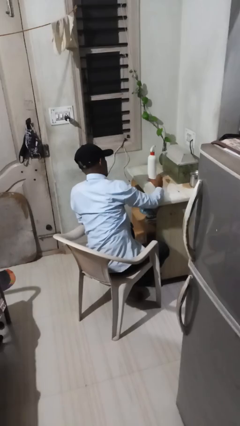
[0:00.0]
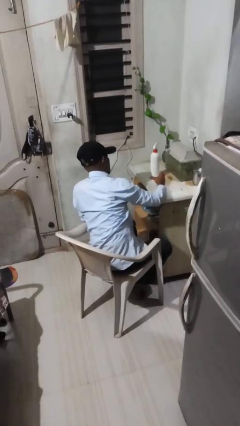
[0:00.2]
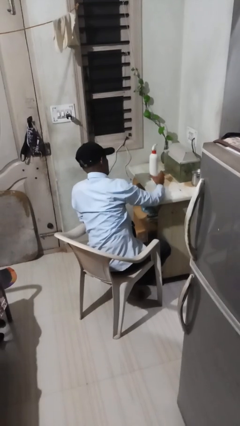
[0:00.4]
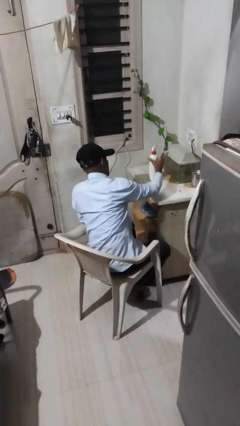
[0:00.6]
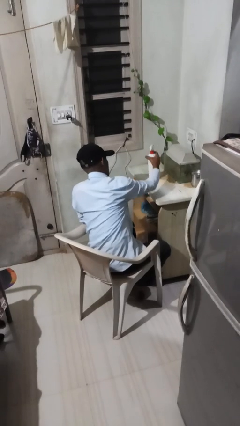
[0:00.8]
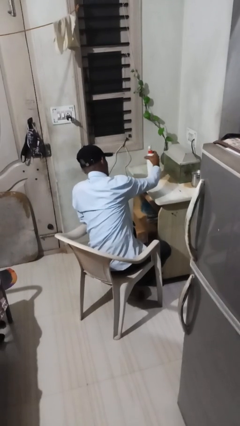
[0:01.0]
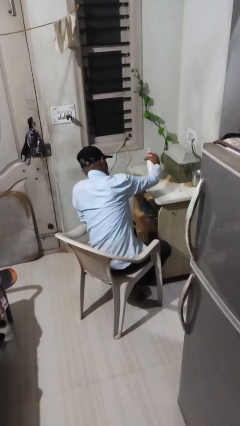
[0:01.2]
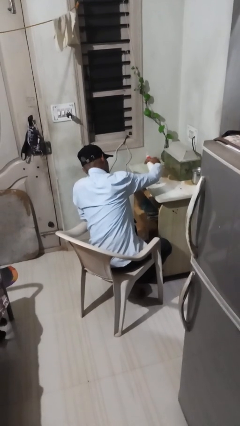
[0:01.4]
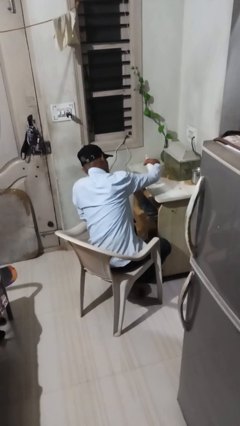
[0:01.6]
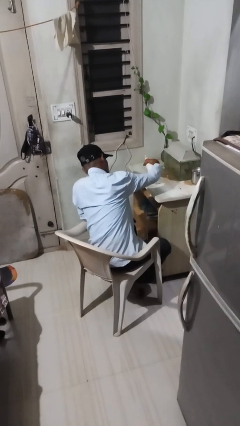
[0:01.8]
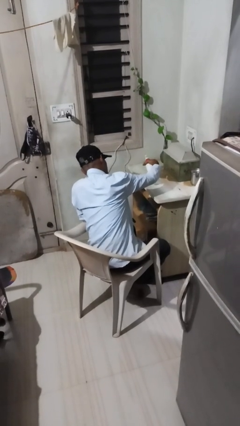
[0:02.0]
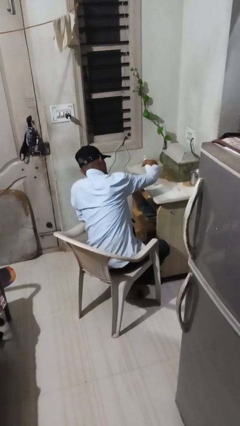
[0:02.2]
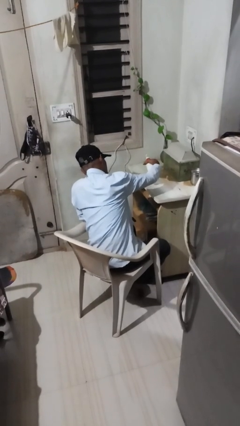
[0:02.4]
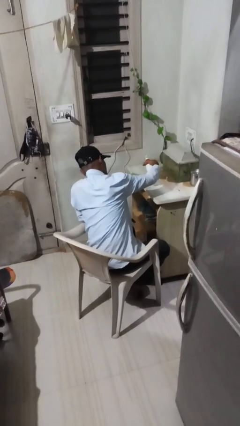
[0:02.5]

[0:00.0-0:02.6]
person sprays from bottle

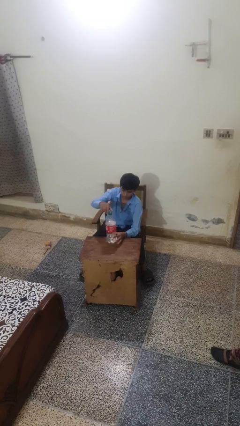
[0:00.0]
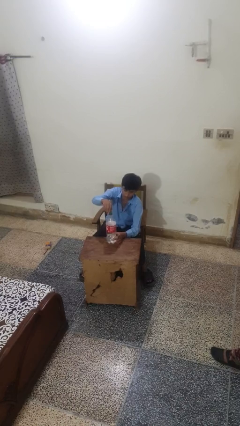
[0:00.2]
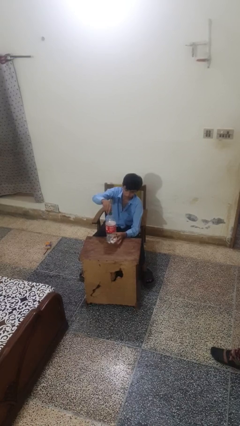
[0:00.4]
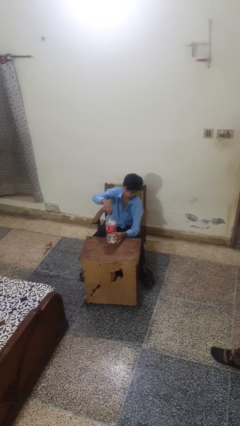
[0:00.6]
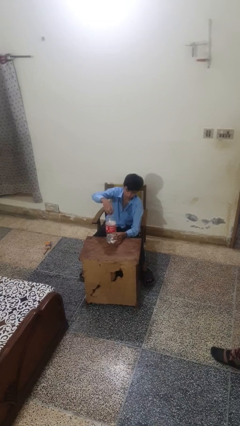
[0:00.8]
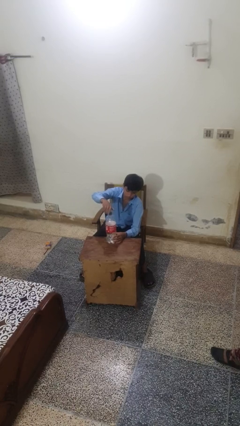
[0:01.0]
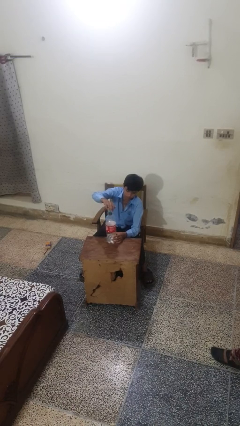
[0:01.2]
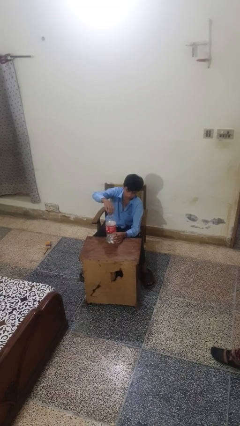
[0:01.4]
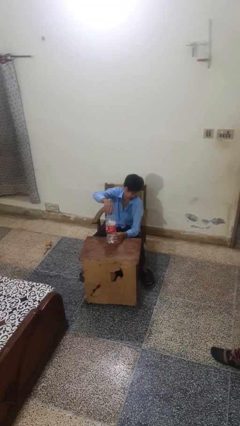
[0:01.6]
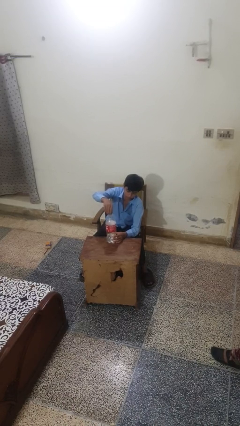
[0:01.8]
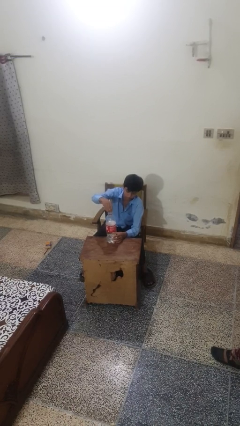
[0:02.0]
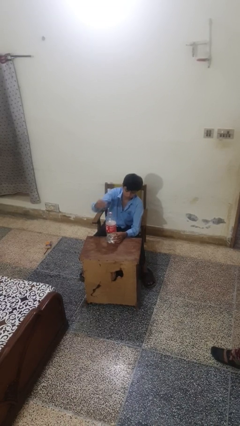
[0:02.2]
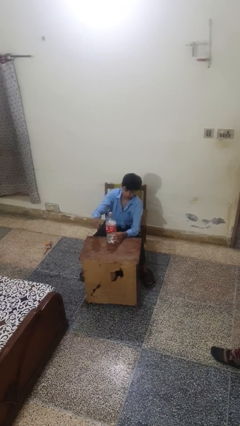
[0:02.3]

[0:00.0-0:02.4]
person unscrews lid from bottle

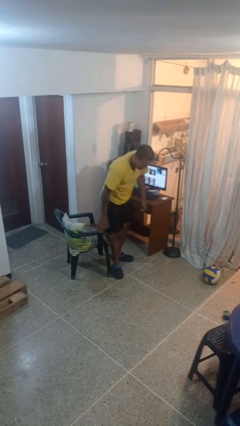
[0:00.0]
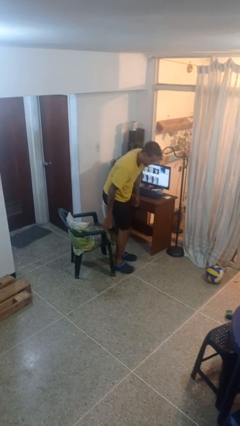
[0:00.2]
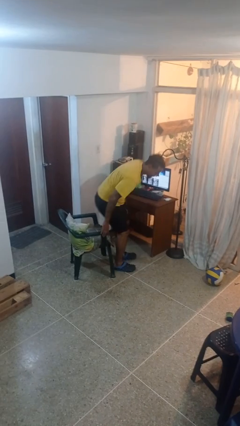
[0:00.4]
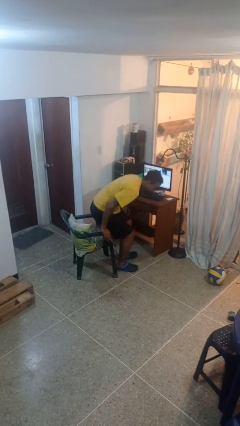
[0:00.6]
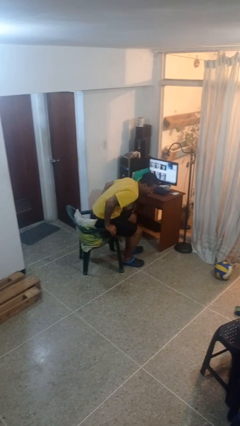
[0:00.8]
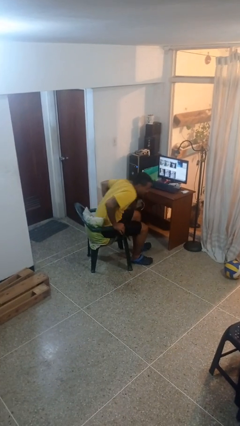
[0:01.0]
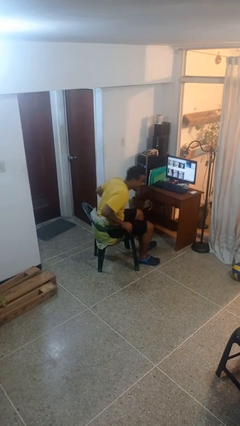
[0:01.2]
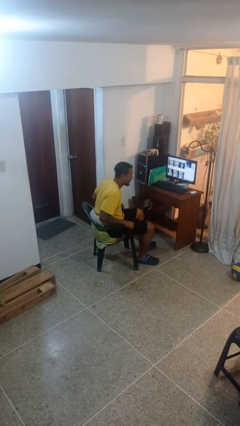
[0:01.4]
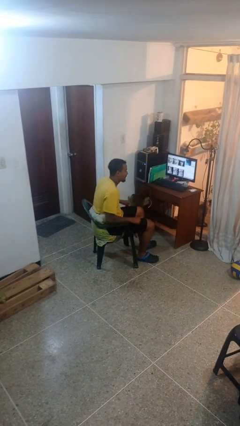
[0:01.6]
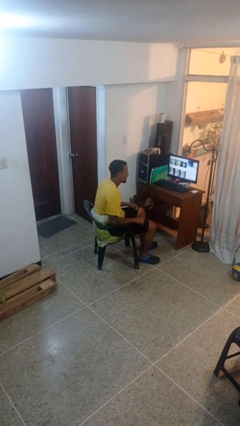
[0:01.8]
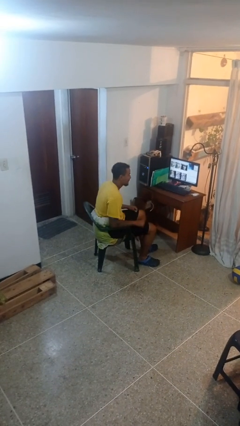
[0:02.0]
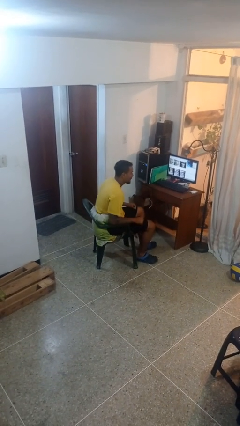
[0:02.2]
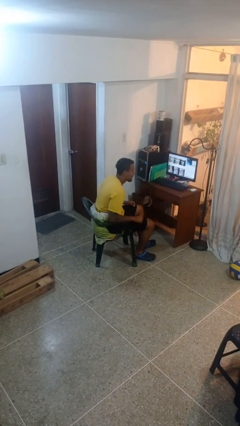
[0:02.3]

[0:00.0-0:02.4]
person sits down

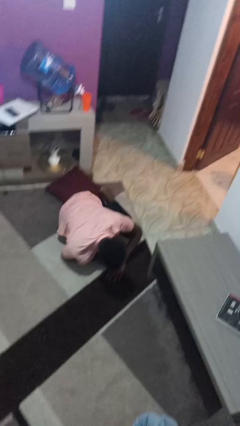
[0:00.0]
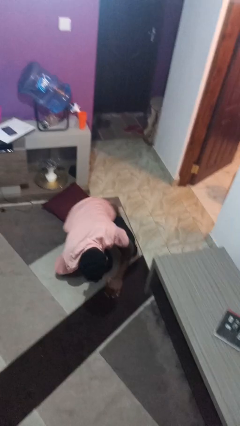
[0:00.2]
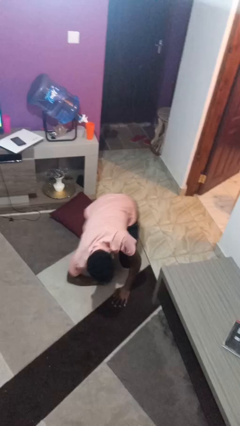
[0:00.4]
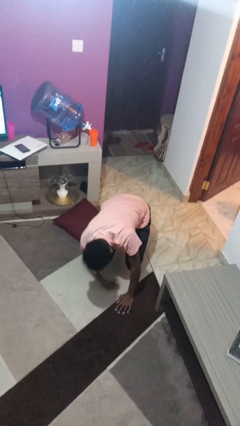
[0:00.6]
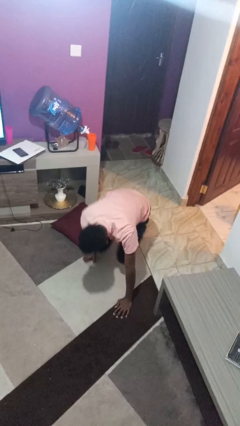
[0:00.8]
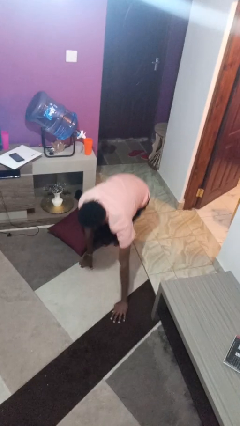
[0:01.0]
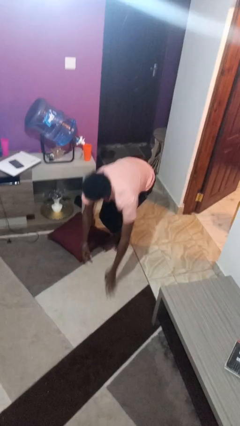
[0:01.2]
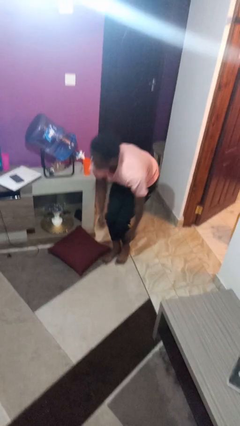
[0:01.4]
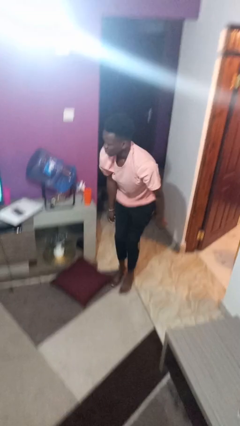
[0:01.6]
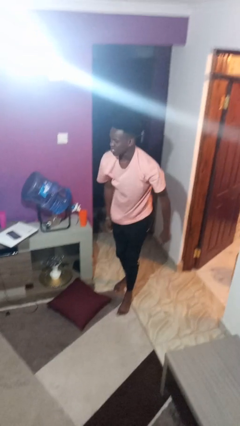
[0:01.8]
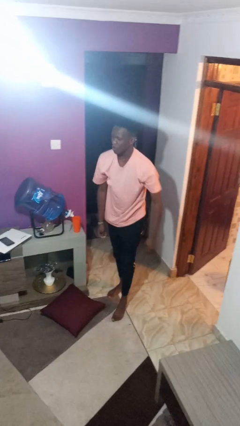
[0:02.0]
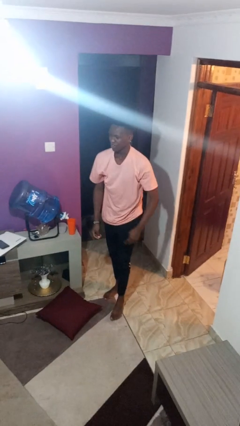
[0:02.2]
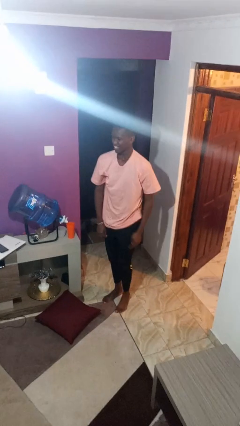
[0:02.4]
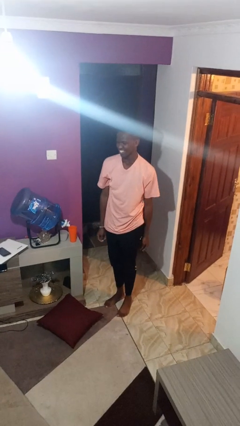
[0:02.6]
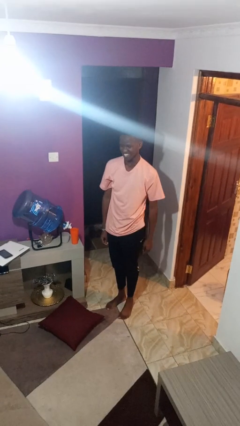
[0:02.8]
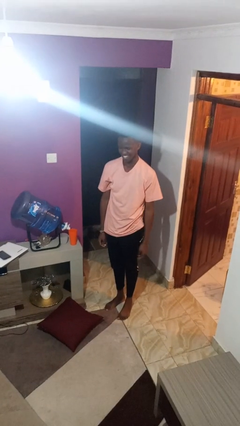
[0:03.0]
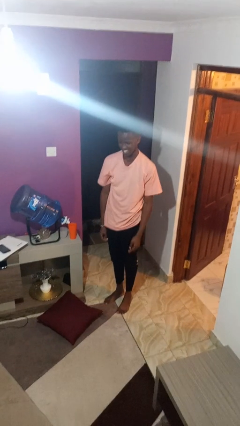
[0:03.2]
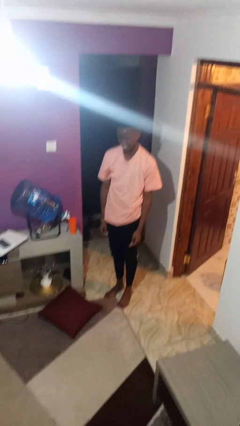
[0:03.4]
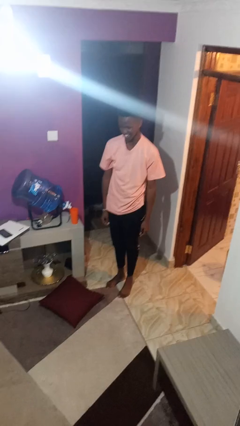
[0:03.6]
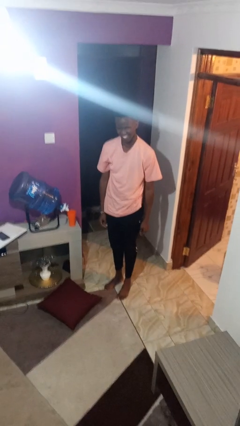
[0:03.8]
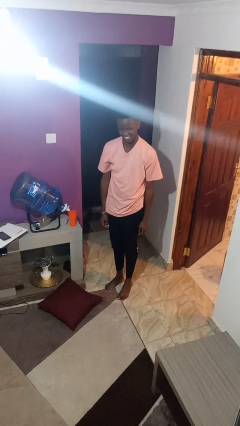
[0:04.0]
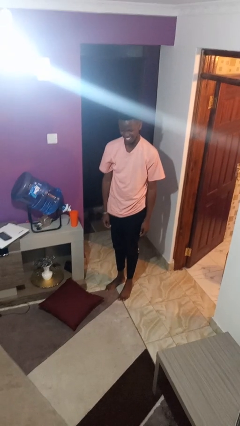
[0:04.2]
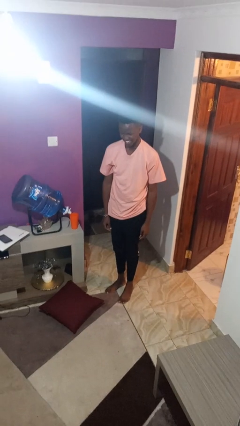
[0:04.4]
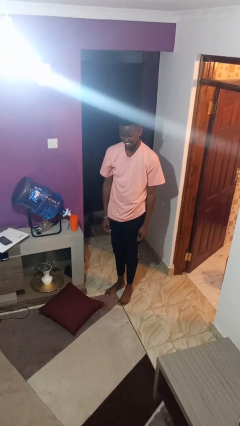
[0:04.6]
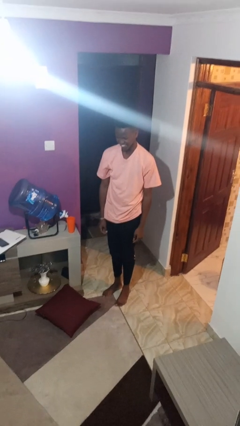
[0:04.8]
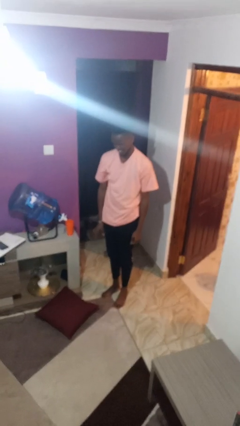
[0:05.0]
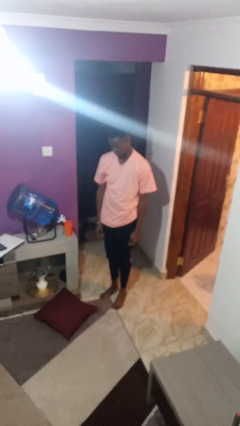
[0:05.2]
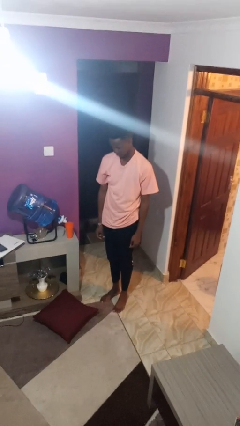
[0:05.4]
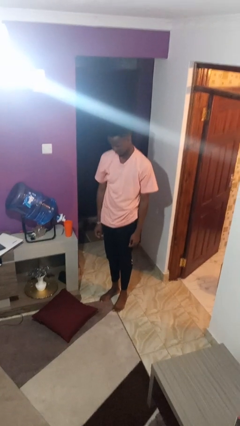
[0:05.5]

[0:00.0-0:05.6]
person stands up from floor

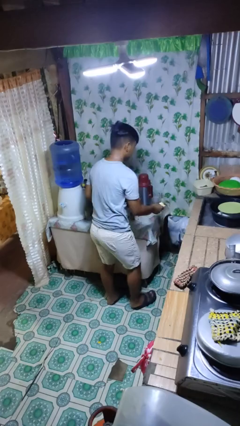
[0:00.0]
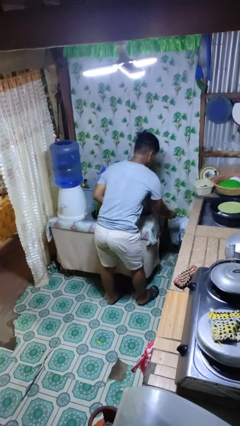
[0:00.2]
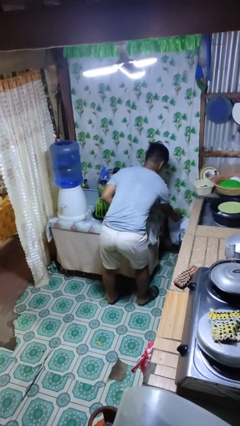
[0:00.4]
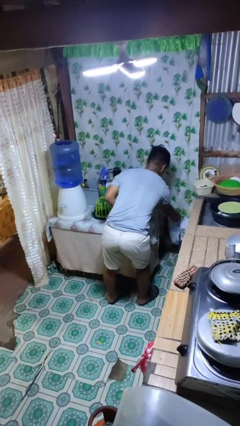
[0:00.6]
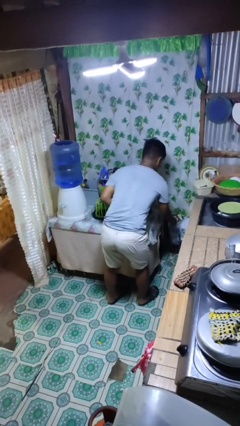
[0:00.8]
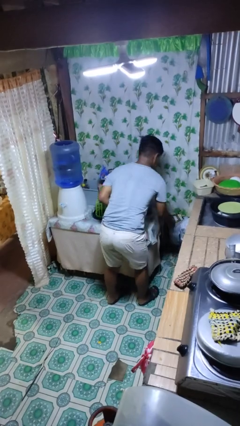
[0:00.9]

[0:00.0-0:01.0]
person discards trash

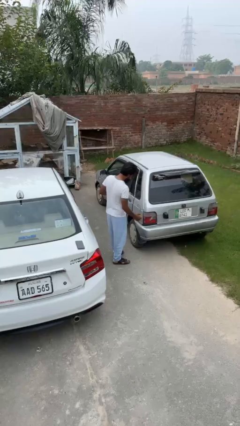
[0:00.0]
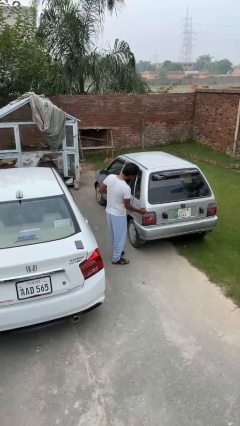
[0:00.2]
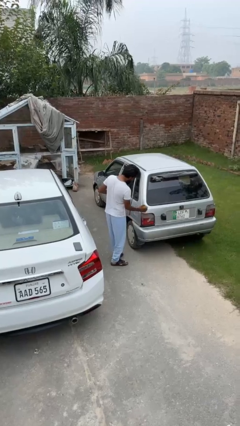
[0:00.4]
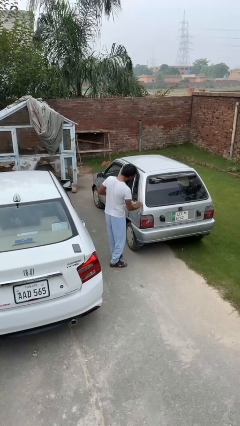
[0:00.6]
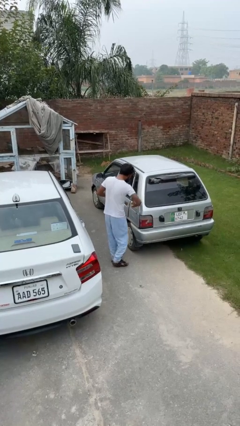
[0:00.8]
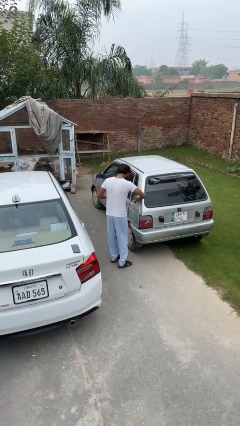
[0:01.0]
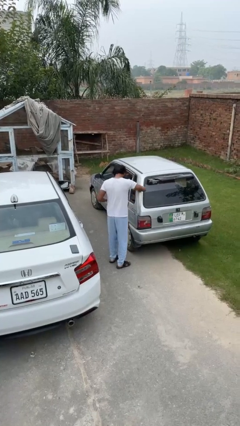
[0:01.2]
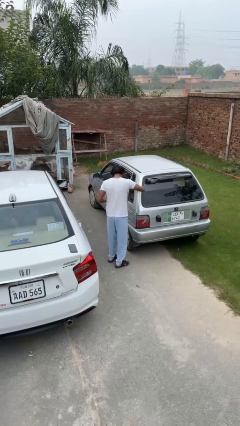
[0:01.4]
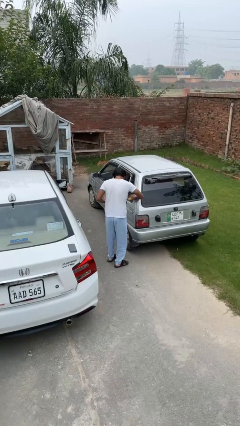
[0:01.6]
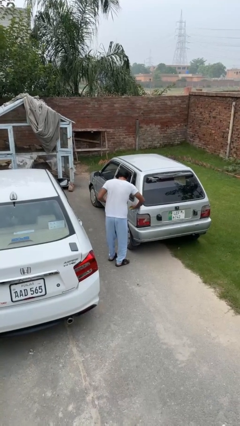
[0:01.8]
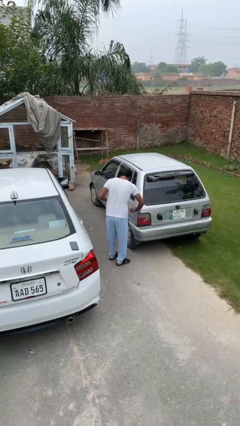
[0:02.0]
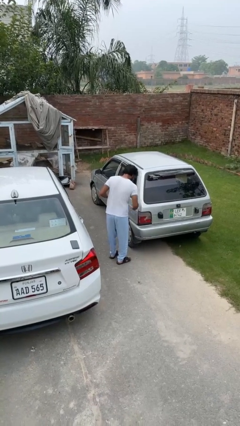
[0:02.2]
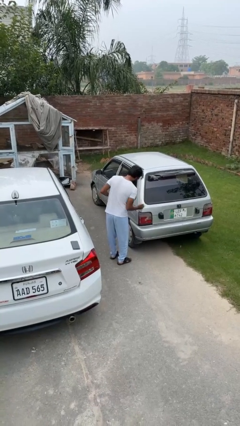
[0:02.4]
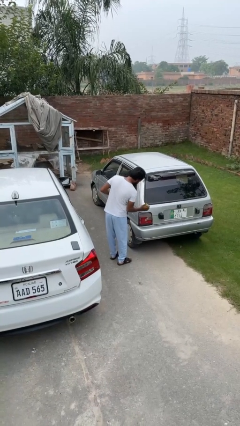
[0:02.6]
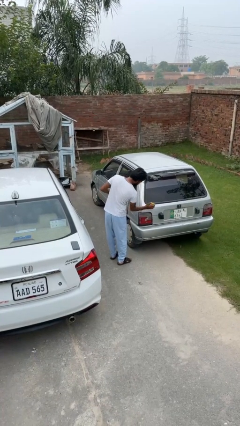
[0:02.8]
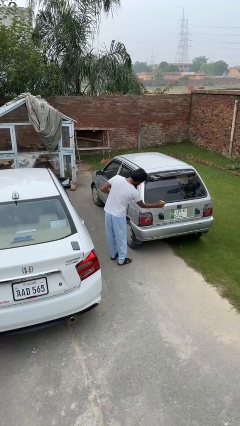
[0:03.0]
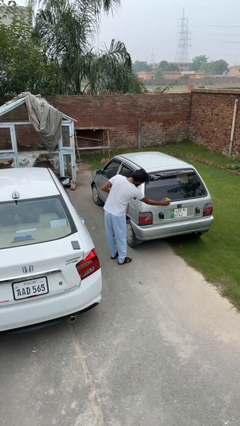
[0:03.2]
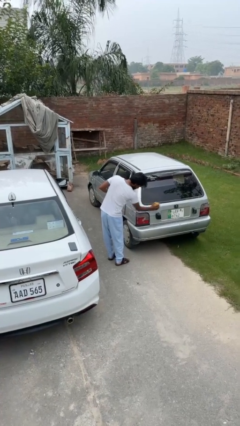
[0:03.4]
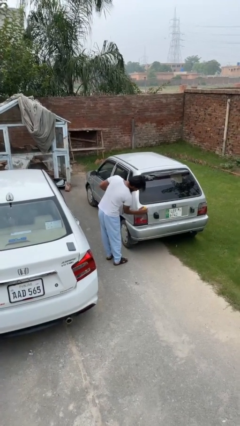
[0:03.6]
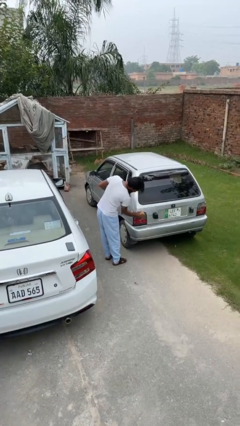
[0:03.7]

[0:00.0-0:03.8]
person polishes car with rag
